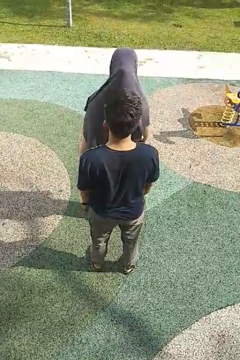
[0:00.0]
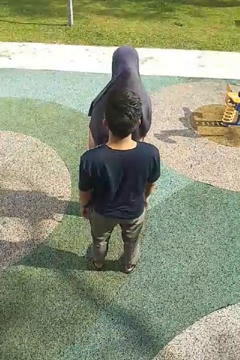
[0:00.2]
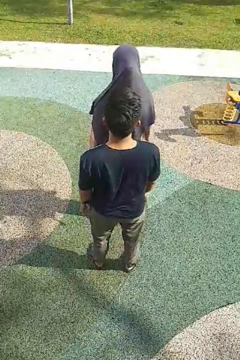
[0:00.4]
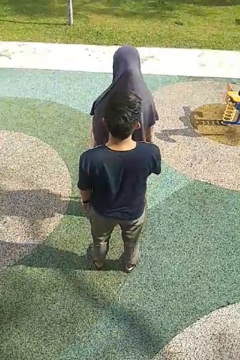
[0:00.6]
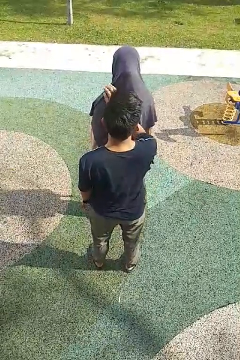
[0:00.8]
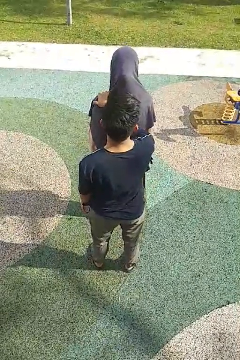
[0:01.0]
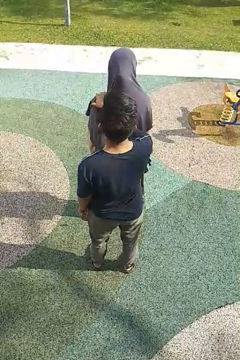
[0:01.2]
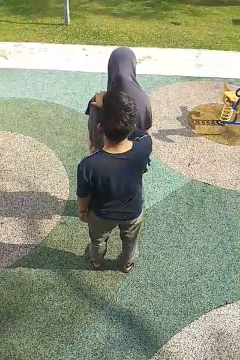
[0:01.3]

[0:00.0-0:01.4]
person grabs person by shoulder

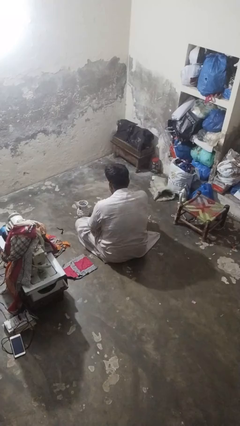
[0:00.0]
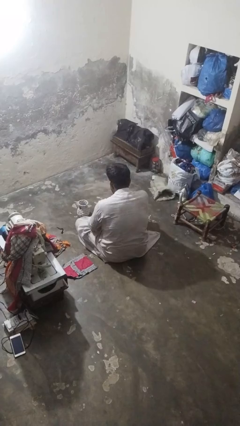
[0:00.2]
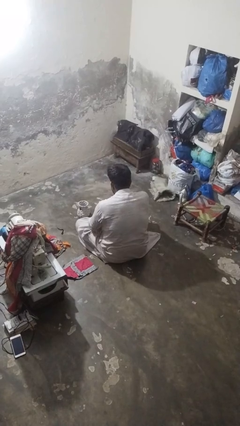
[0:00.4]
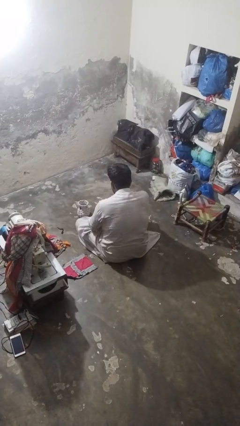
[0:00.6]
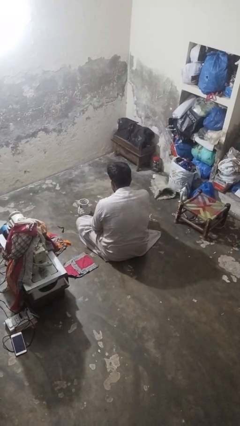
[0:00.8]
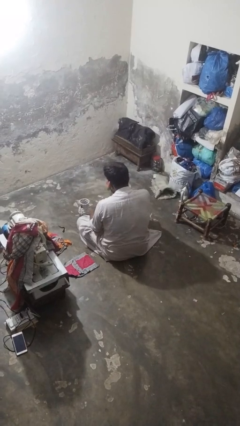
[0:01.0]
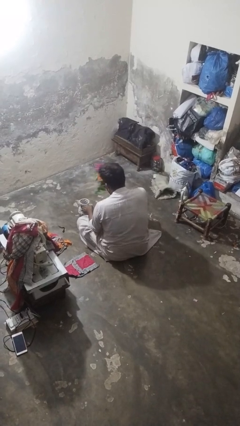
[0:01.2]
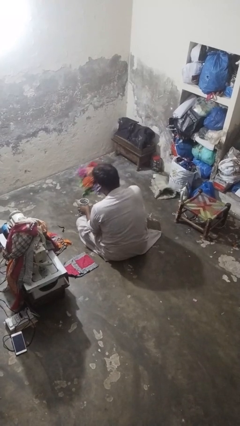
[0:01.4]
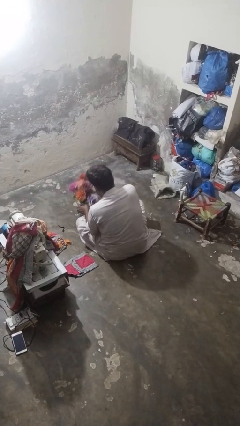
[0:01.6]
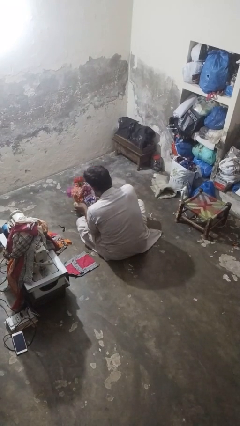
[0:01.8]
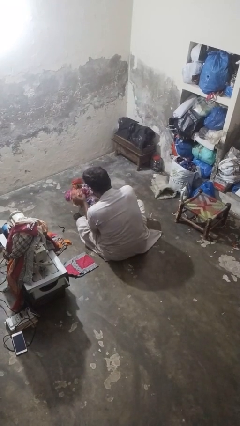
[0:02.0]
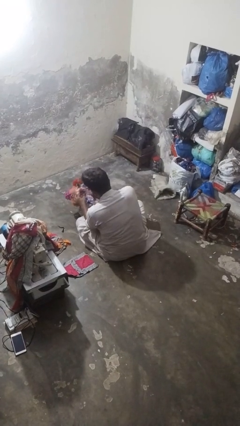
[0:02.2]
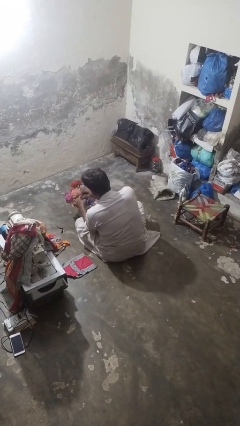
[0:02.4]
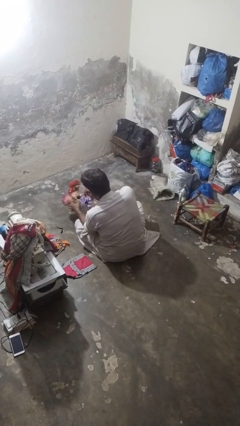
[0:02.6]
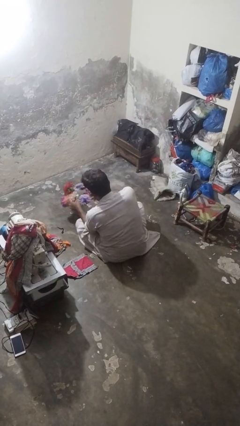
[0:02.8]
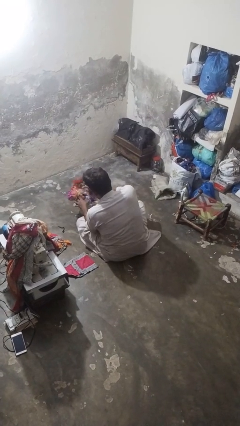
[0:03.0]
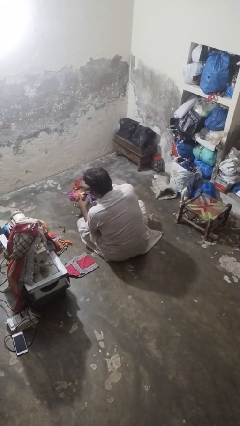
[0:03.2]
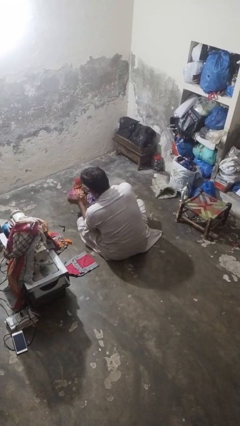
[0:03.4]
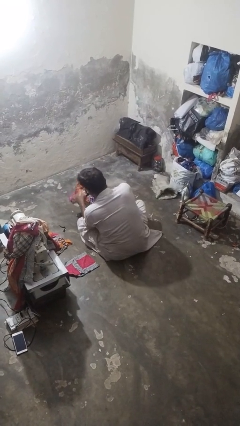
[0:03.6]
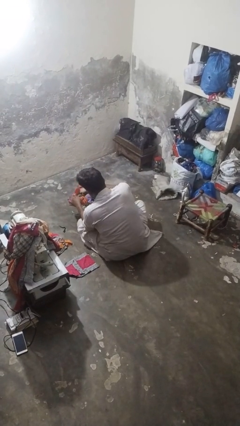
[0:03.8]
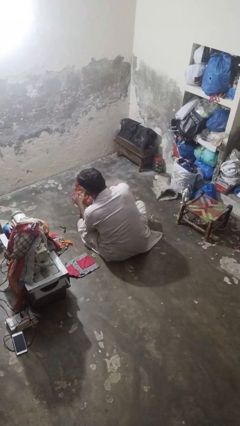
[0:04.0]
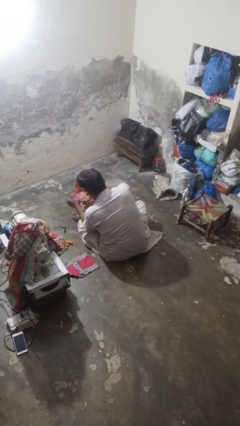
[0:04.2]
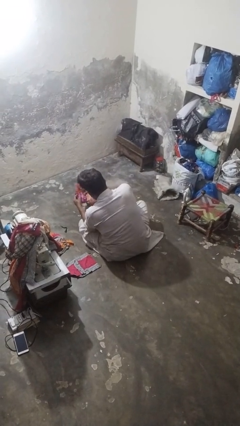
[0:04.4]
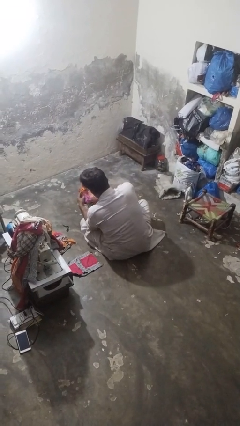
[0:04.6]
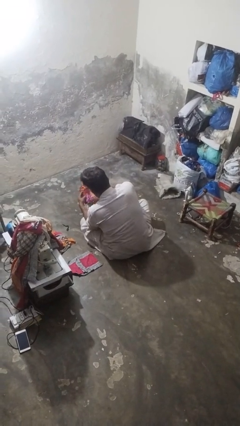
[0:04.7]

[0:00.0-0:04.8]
person arranges flowers in vase

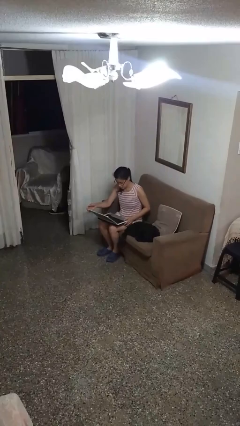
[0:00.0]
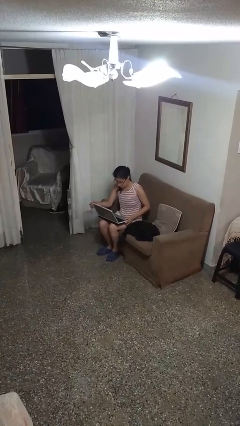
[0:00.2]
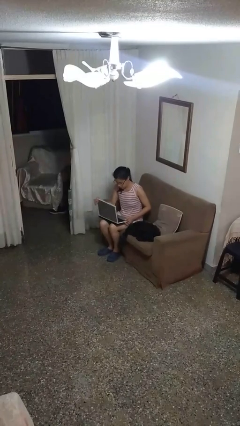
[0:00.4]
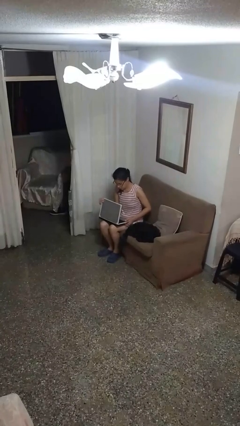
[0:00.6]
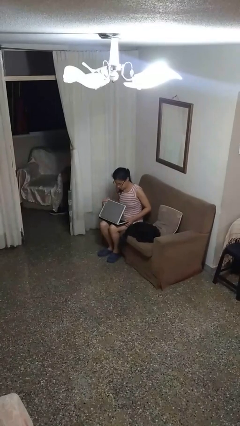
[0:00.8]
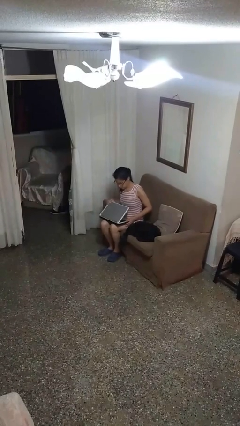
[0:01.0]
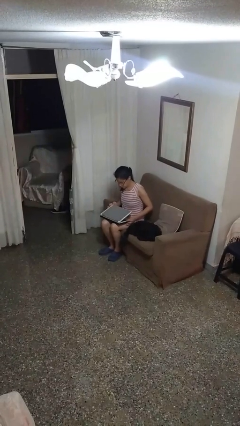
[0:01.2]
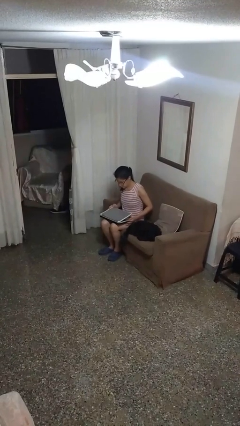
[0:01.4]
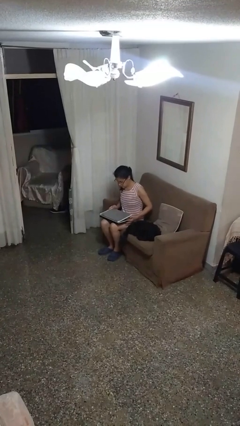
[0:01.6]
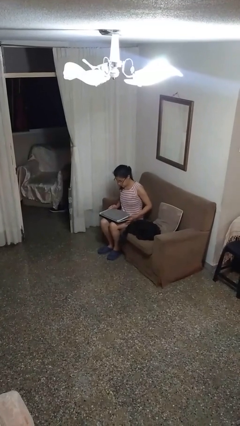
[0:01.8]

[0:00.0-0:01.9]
person closes laptop

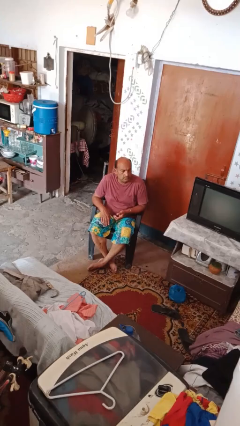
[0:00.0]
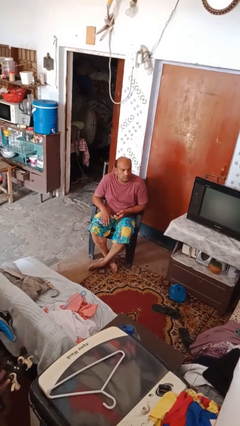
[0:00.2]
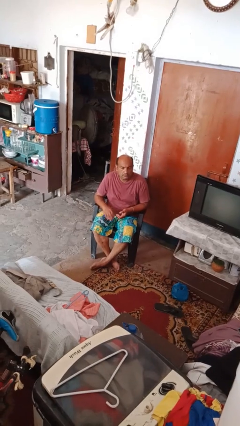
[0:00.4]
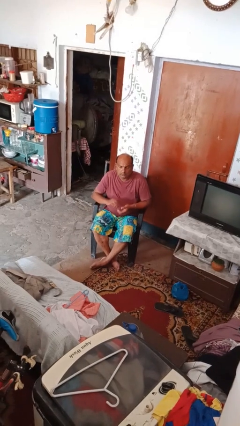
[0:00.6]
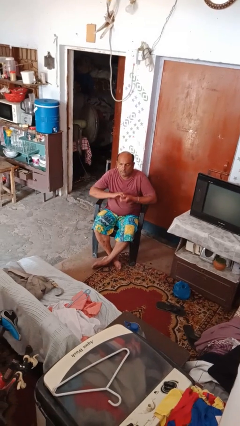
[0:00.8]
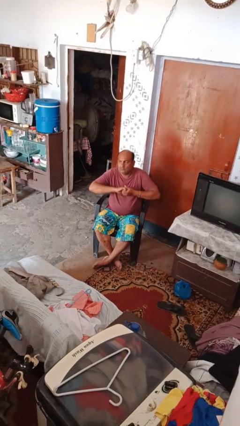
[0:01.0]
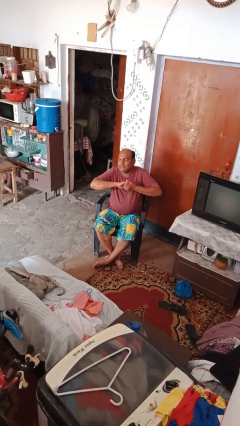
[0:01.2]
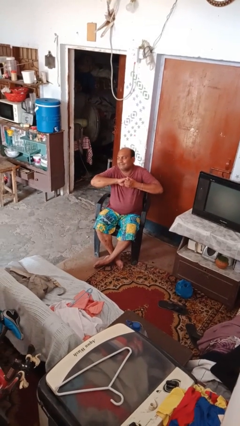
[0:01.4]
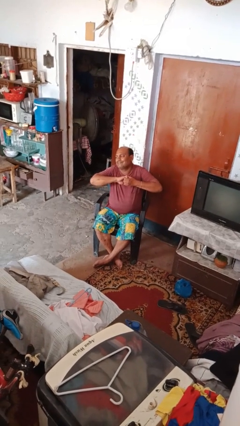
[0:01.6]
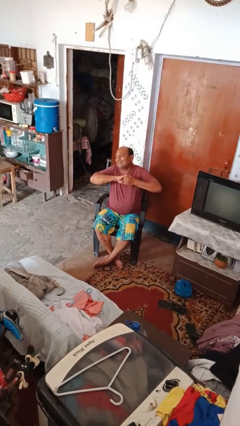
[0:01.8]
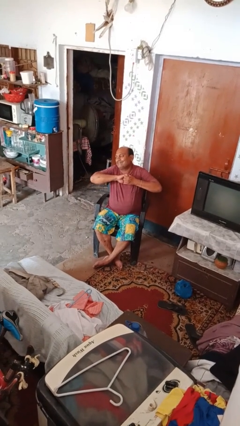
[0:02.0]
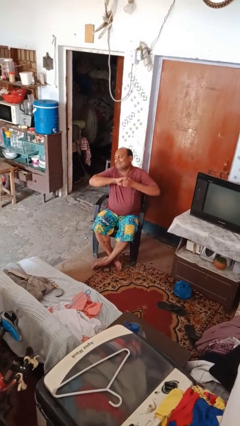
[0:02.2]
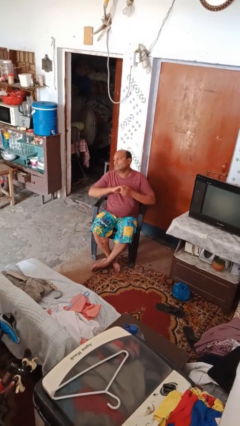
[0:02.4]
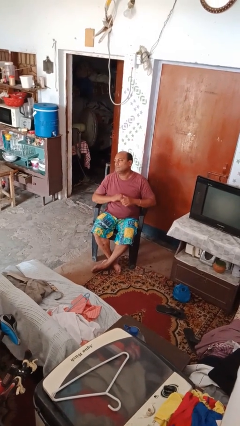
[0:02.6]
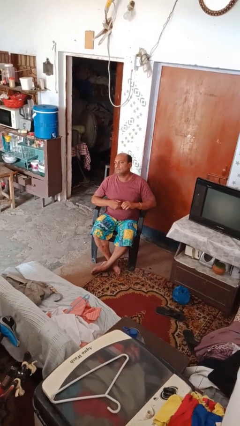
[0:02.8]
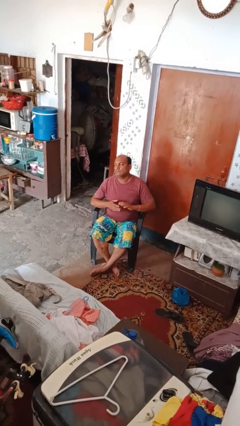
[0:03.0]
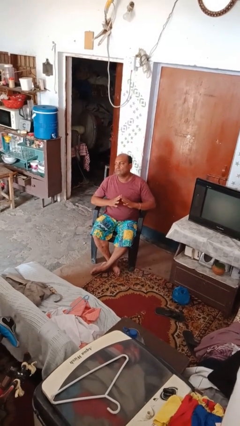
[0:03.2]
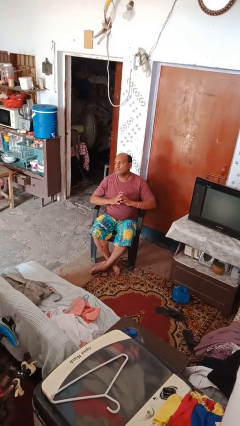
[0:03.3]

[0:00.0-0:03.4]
person cracks knuckles

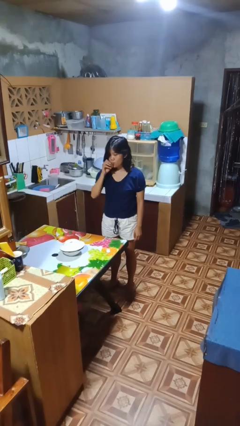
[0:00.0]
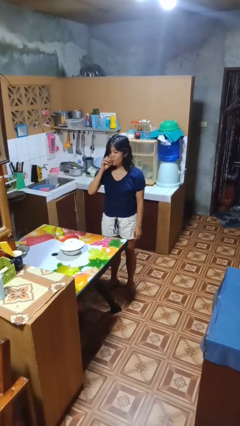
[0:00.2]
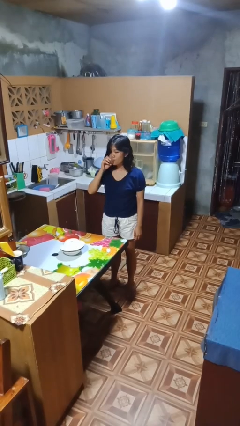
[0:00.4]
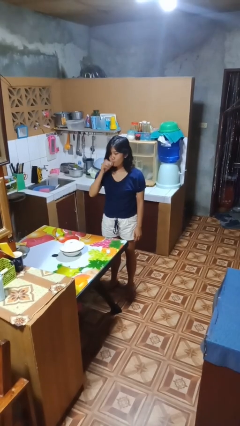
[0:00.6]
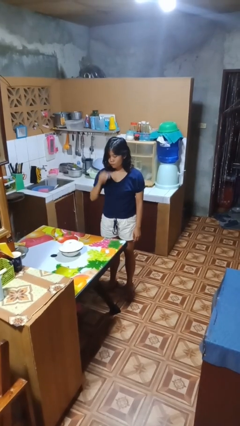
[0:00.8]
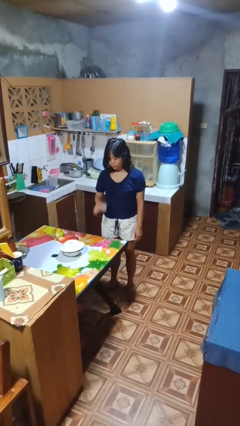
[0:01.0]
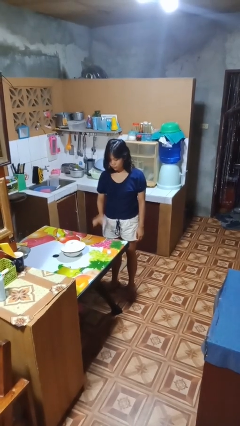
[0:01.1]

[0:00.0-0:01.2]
person drinks from shotglass

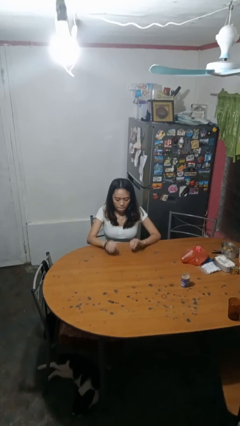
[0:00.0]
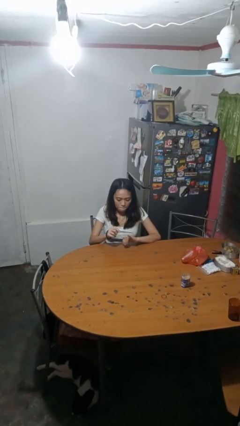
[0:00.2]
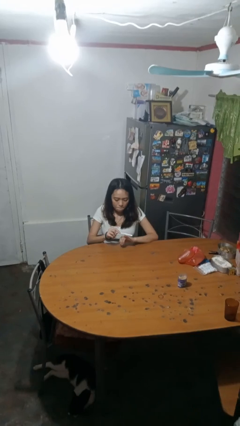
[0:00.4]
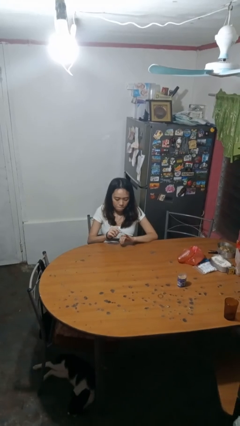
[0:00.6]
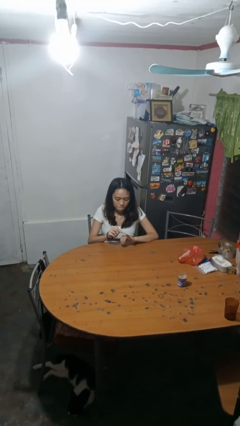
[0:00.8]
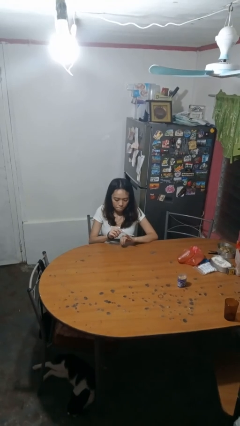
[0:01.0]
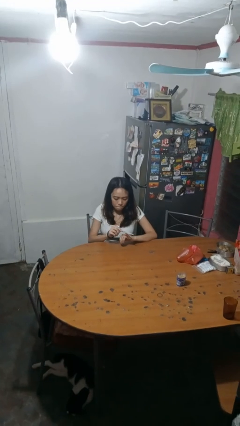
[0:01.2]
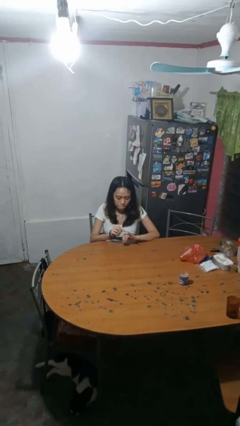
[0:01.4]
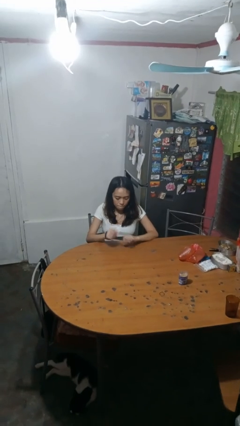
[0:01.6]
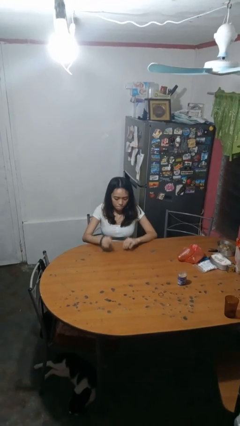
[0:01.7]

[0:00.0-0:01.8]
person files fingernails

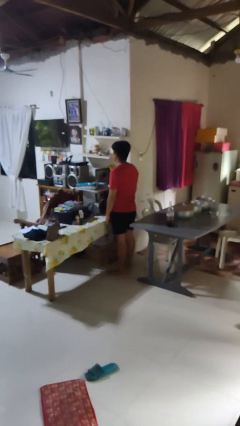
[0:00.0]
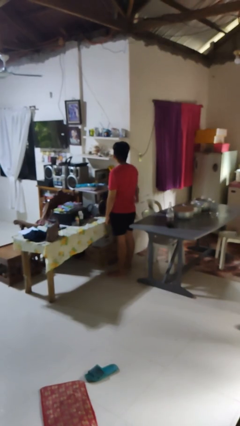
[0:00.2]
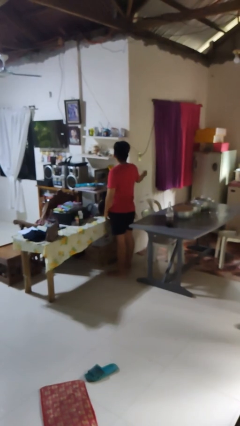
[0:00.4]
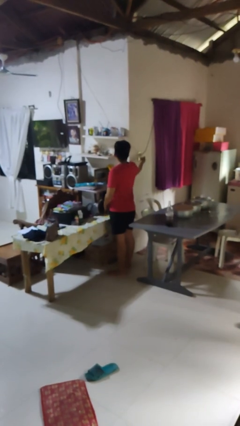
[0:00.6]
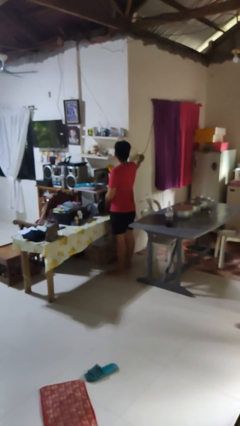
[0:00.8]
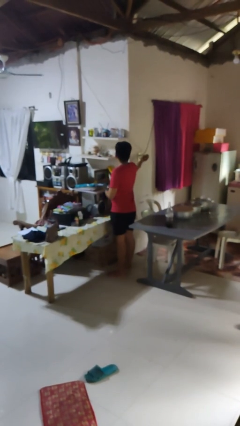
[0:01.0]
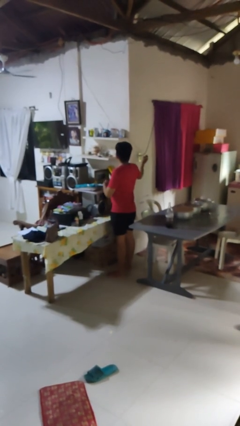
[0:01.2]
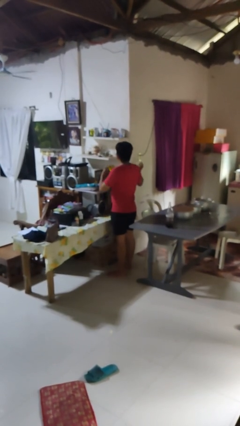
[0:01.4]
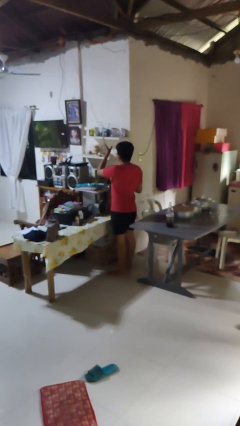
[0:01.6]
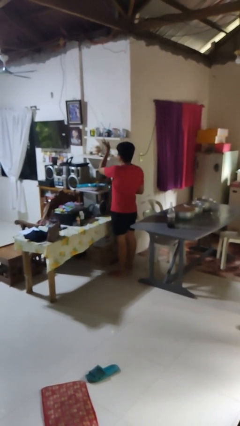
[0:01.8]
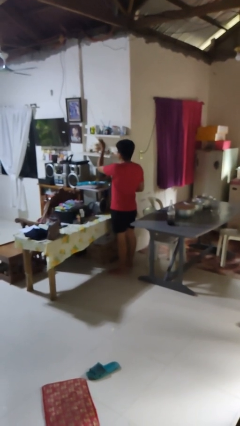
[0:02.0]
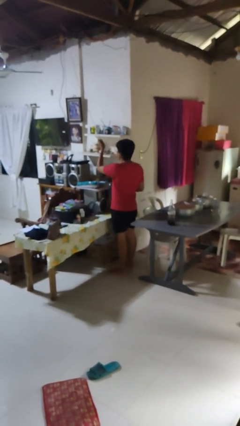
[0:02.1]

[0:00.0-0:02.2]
person turns off fan

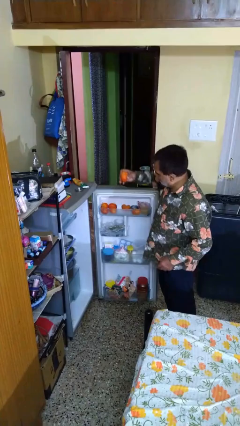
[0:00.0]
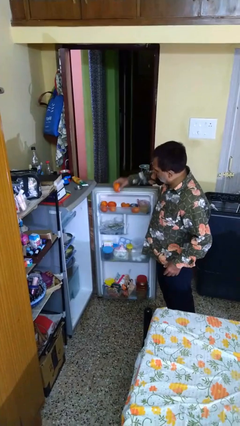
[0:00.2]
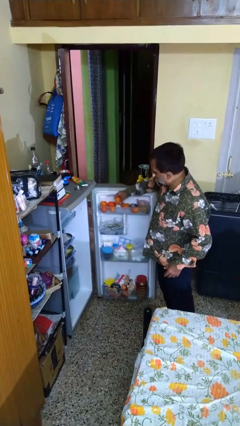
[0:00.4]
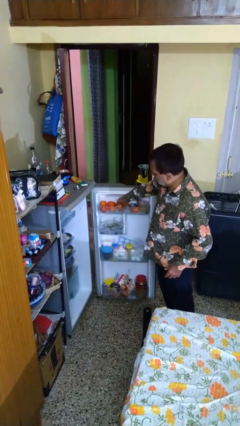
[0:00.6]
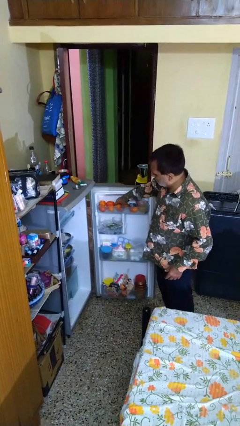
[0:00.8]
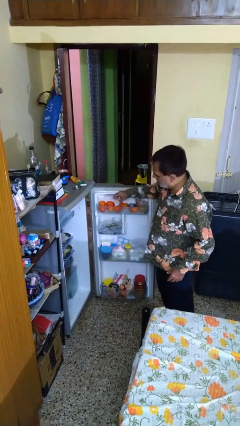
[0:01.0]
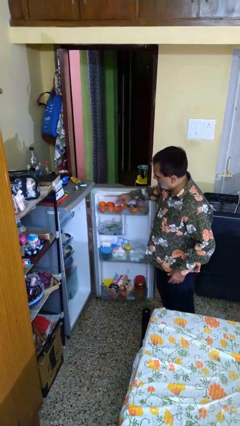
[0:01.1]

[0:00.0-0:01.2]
person puts object into refrigerator
